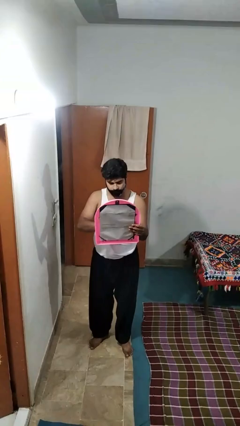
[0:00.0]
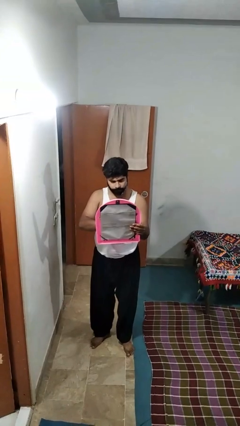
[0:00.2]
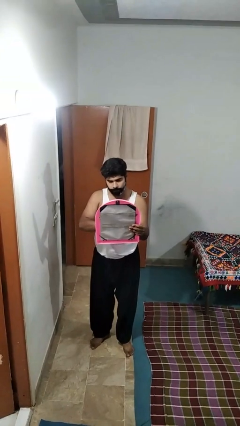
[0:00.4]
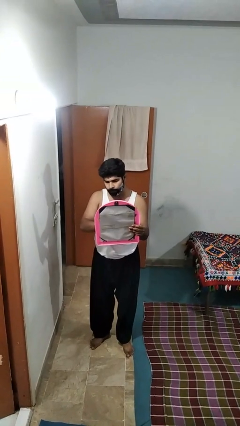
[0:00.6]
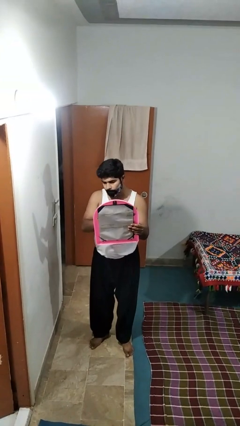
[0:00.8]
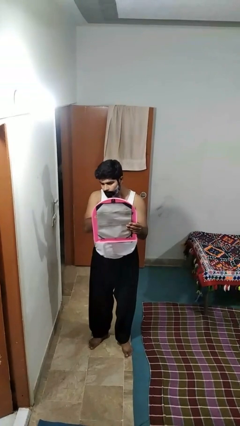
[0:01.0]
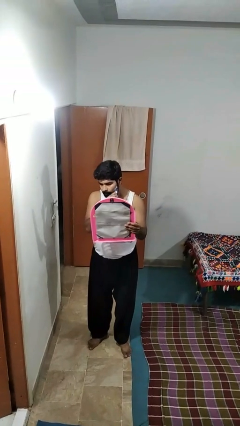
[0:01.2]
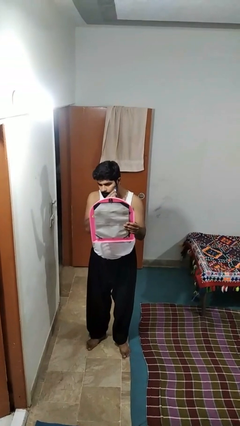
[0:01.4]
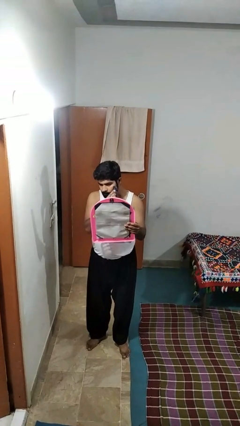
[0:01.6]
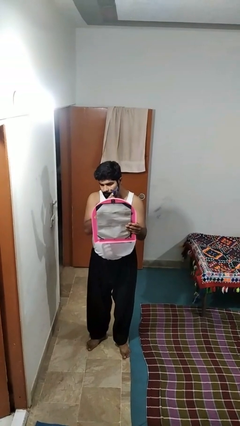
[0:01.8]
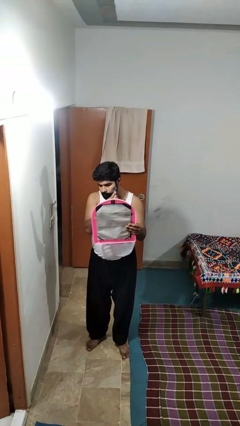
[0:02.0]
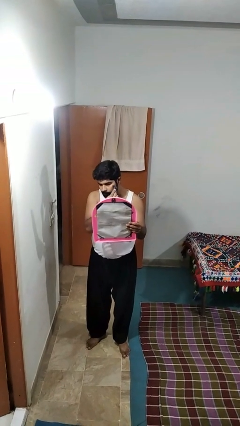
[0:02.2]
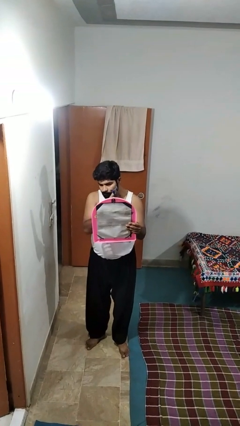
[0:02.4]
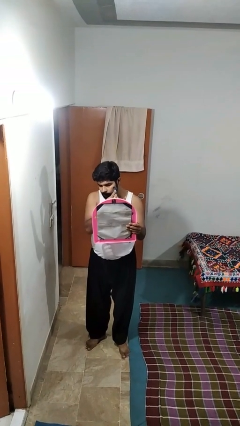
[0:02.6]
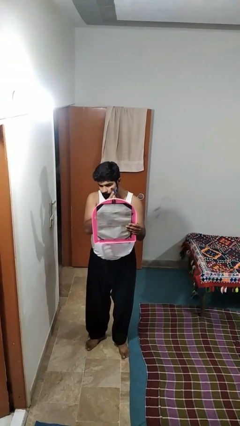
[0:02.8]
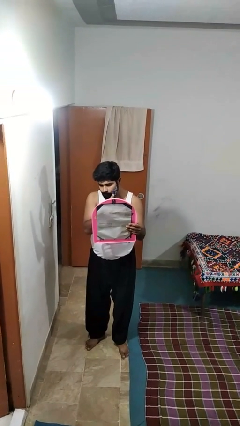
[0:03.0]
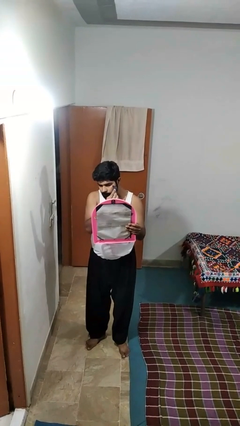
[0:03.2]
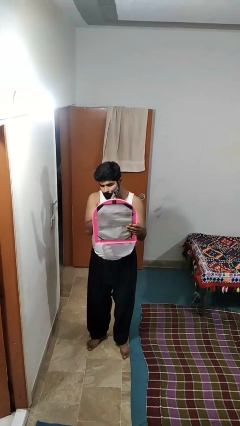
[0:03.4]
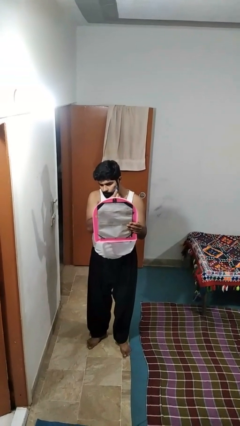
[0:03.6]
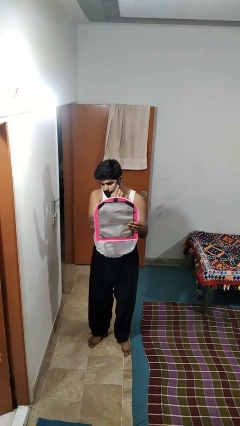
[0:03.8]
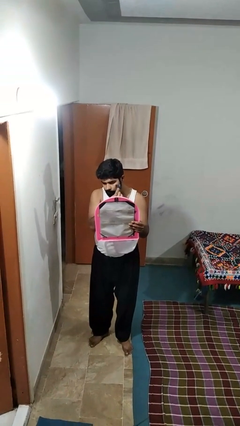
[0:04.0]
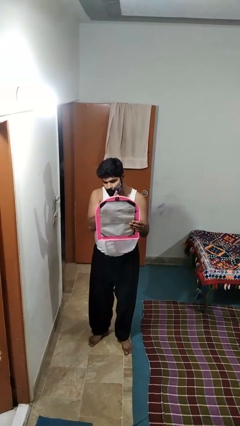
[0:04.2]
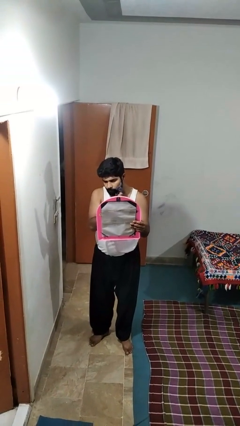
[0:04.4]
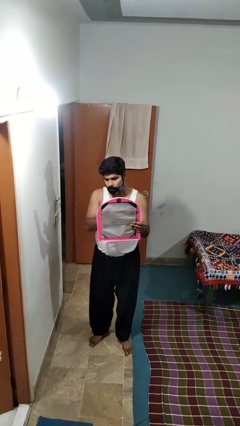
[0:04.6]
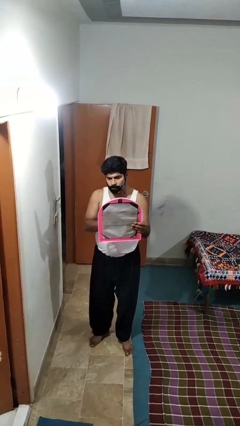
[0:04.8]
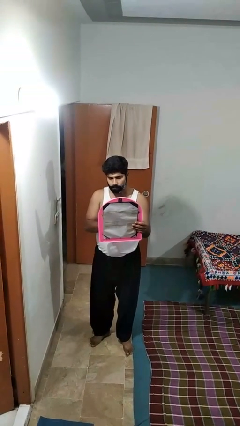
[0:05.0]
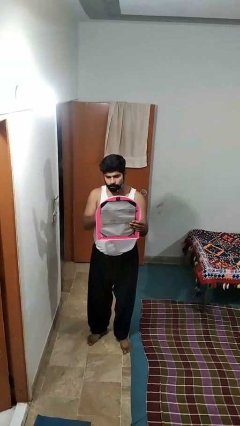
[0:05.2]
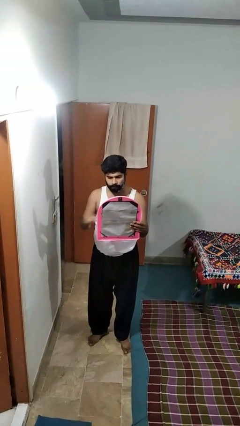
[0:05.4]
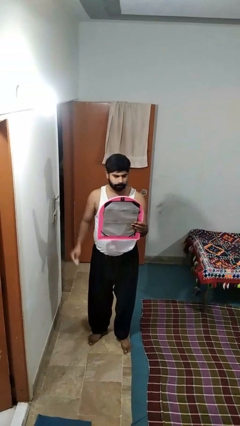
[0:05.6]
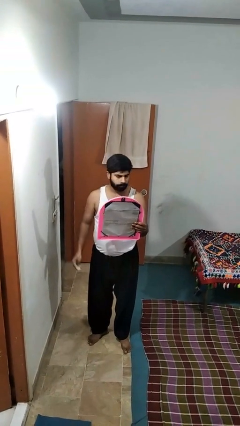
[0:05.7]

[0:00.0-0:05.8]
person shaves face

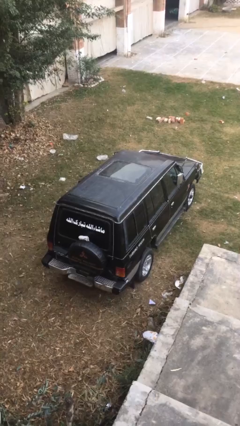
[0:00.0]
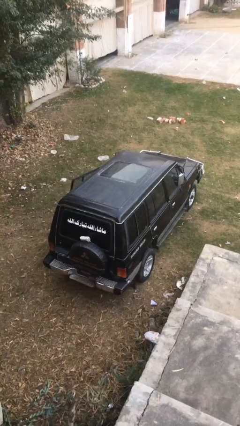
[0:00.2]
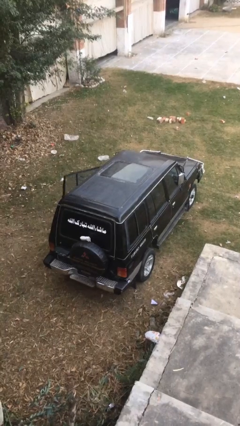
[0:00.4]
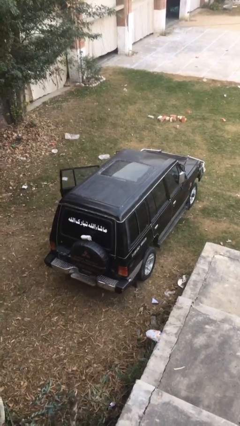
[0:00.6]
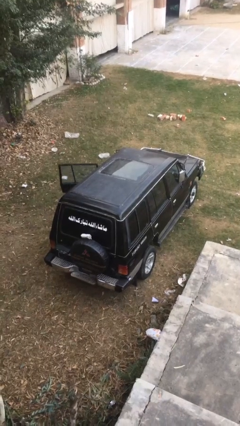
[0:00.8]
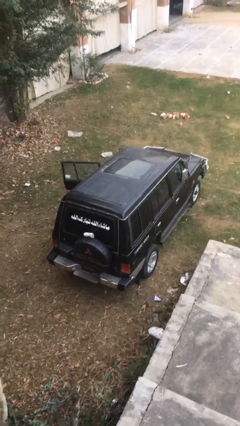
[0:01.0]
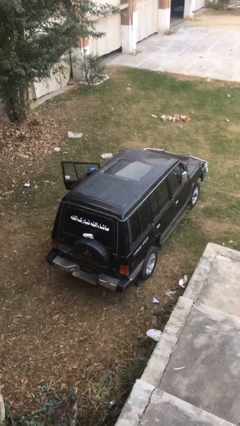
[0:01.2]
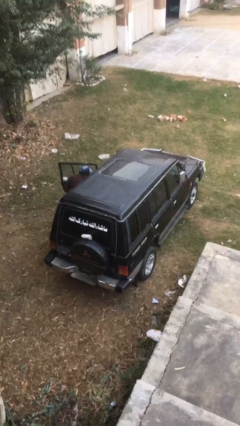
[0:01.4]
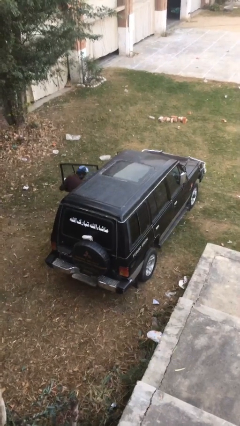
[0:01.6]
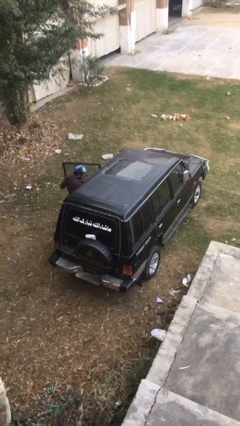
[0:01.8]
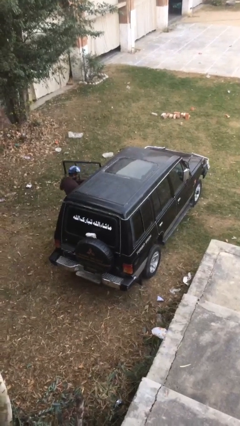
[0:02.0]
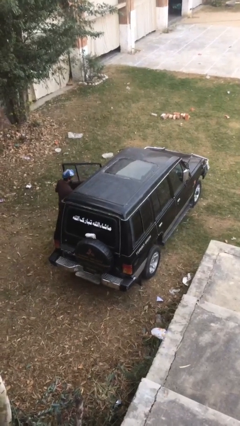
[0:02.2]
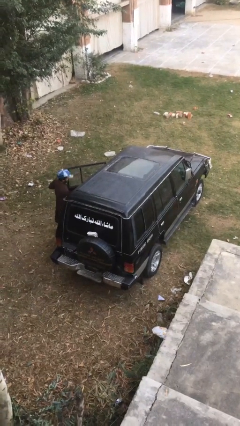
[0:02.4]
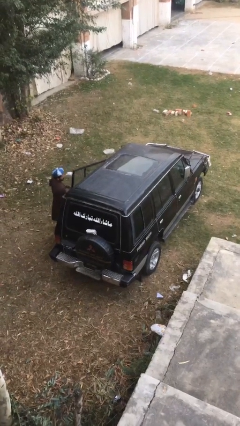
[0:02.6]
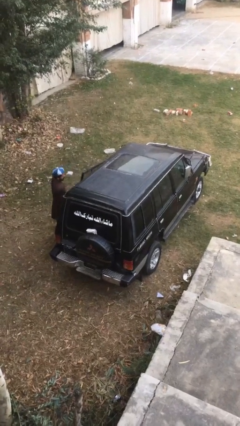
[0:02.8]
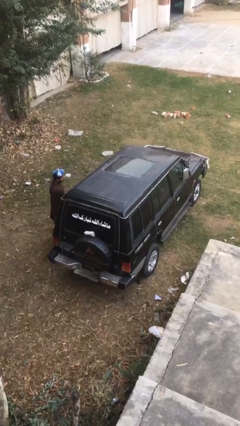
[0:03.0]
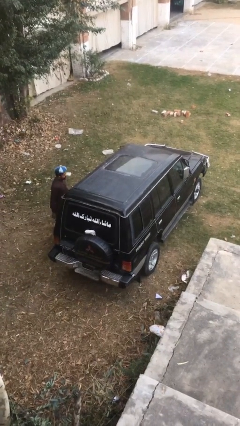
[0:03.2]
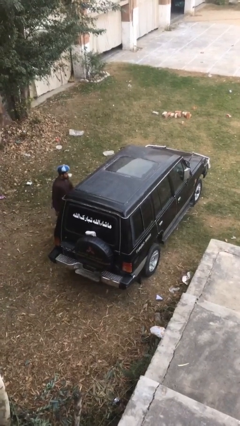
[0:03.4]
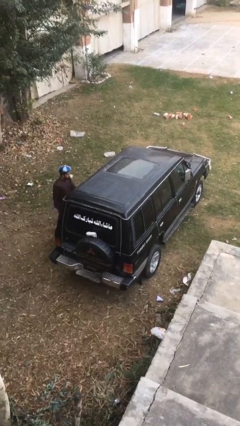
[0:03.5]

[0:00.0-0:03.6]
car drops off person

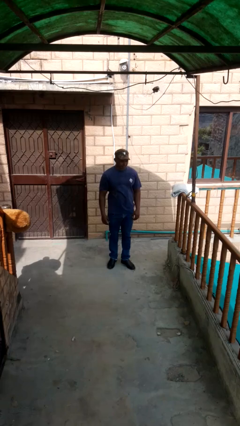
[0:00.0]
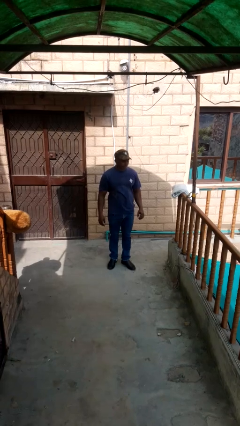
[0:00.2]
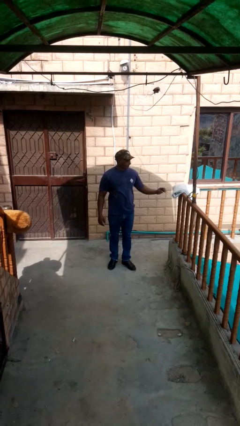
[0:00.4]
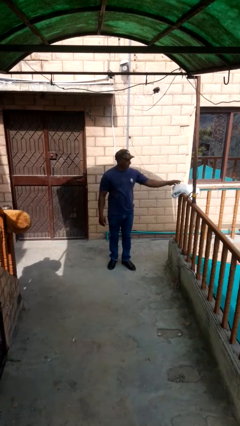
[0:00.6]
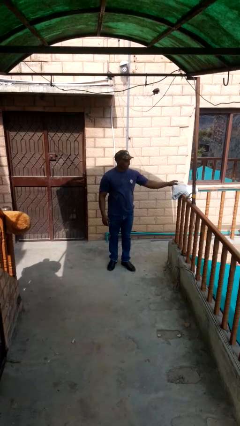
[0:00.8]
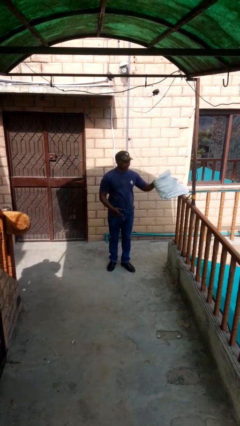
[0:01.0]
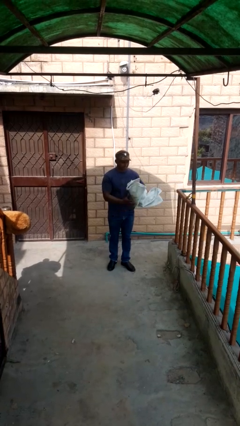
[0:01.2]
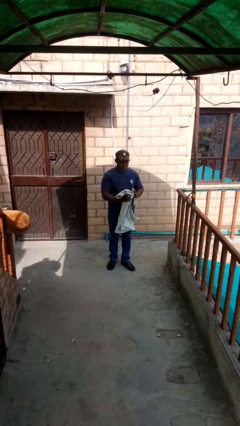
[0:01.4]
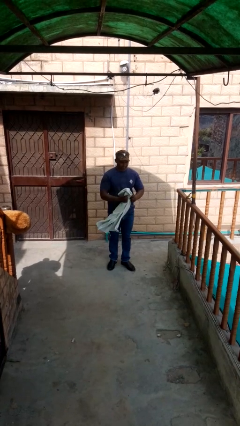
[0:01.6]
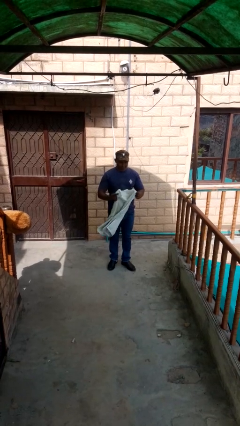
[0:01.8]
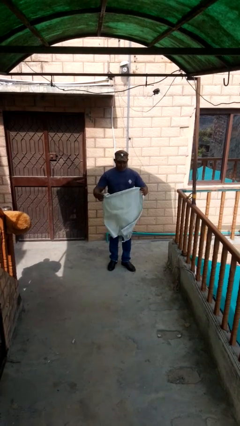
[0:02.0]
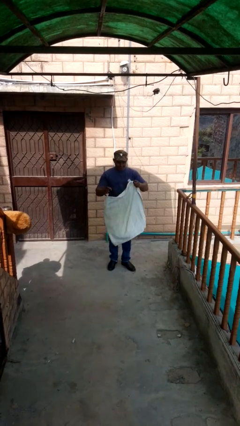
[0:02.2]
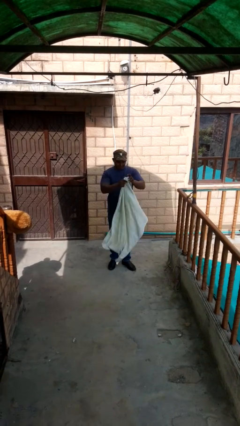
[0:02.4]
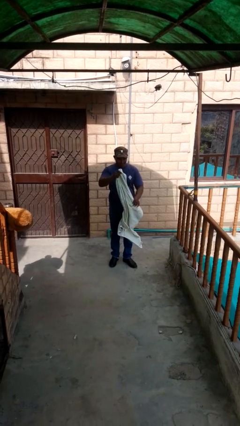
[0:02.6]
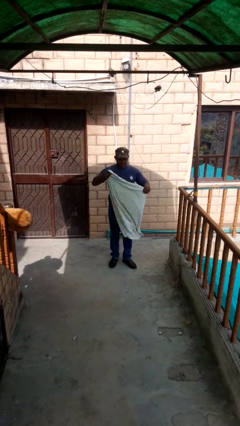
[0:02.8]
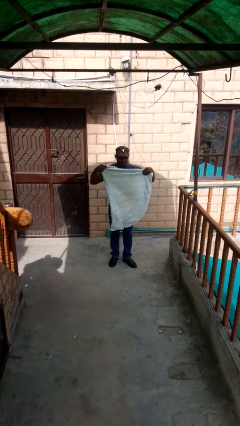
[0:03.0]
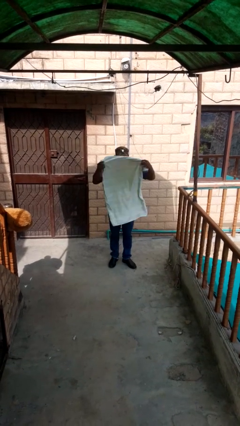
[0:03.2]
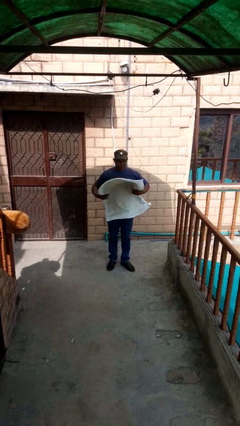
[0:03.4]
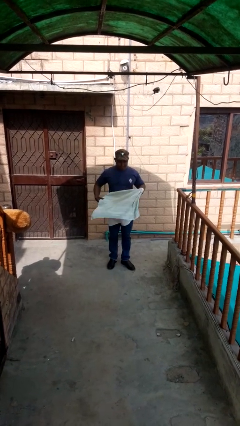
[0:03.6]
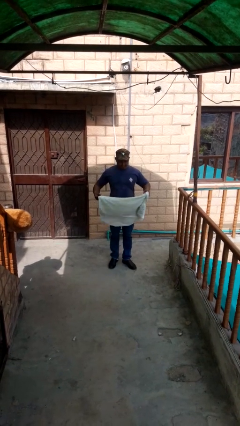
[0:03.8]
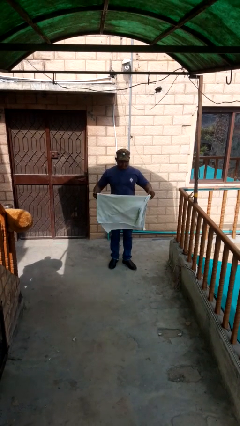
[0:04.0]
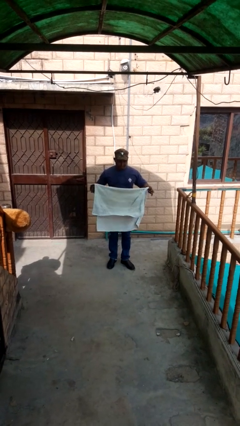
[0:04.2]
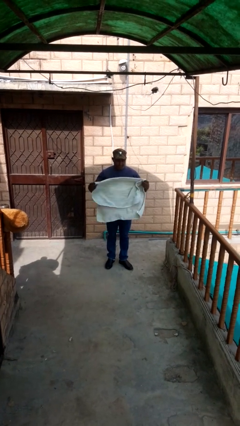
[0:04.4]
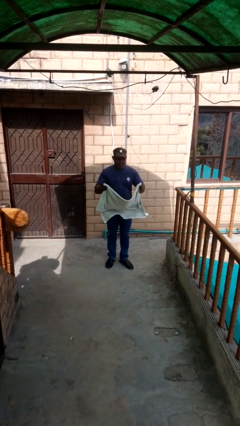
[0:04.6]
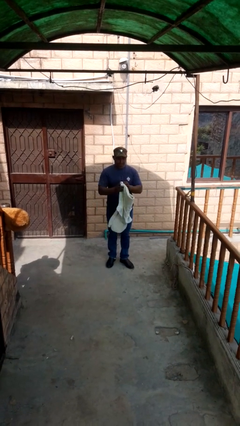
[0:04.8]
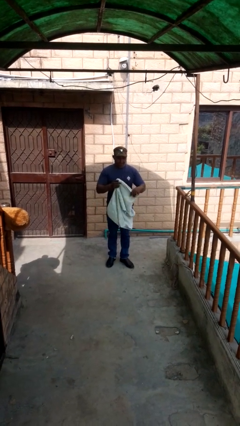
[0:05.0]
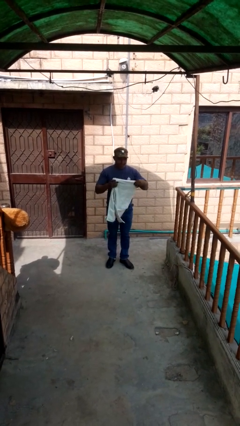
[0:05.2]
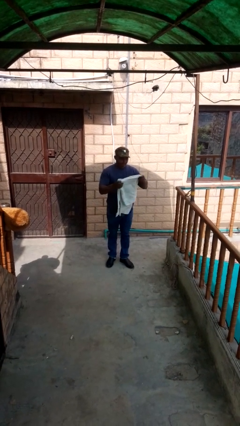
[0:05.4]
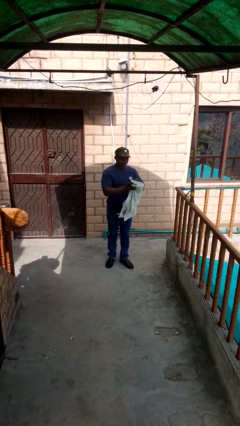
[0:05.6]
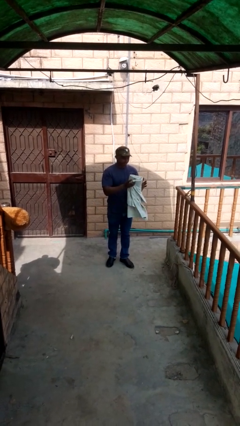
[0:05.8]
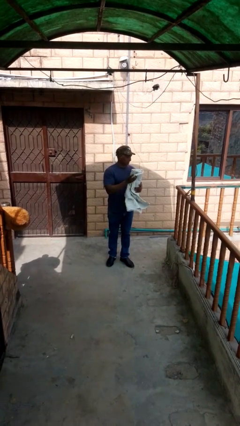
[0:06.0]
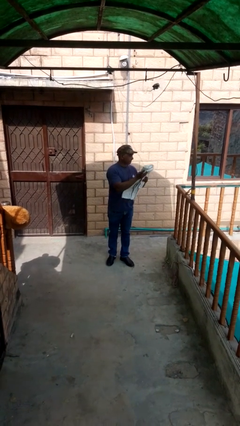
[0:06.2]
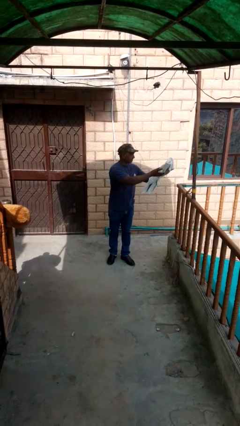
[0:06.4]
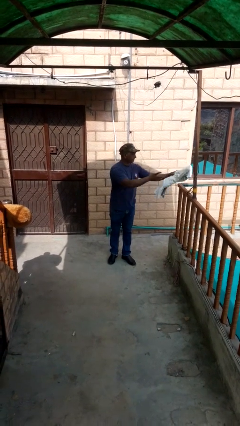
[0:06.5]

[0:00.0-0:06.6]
person folds towel

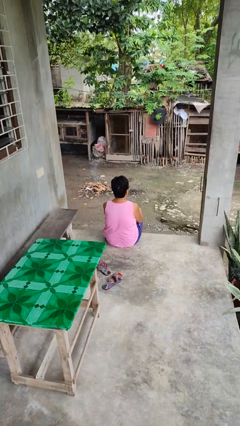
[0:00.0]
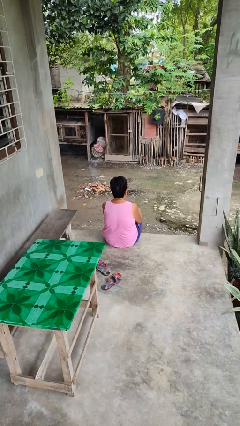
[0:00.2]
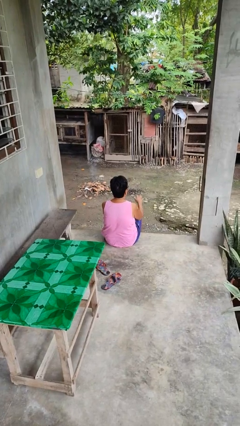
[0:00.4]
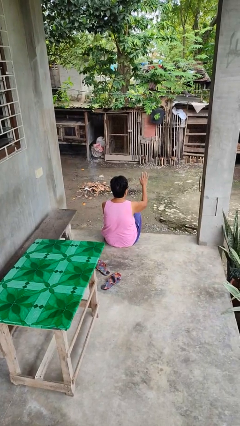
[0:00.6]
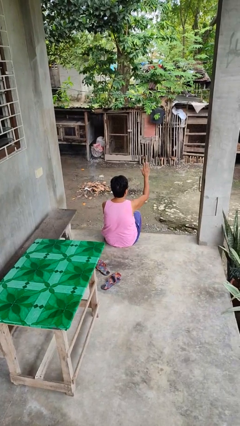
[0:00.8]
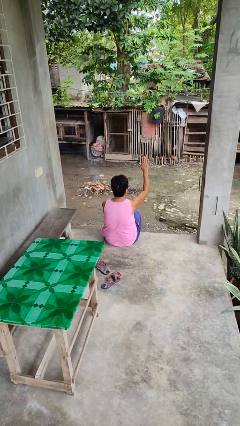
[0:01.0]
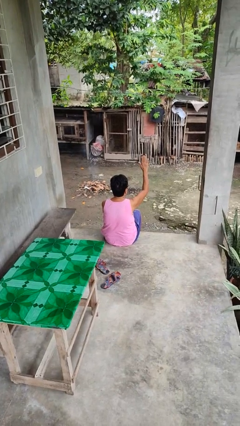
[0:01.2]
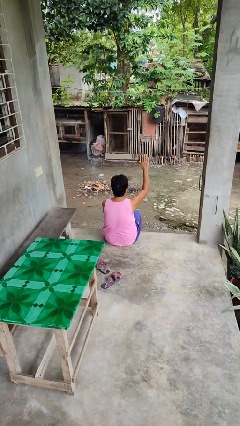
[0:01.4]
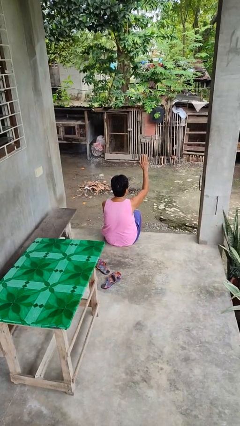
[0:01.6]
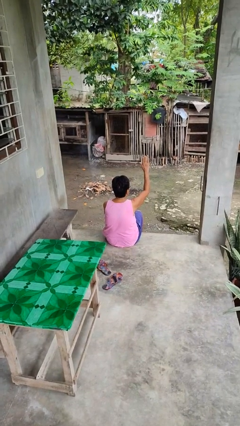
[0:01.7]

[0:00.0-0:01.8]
person gestures raise hand
